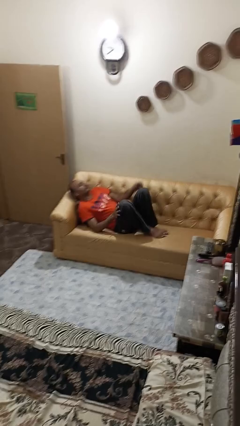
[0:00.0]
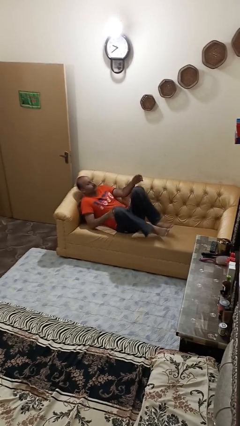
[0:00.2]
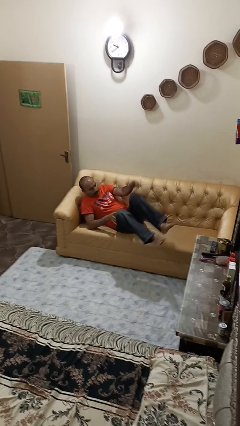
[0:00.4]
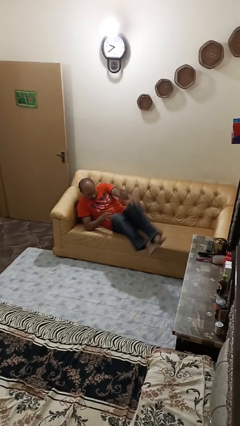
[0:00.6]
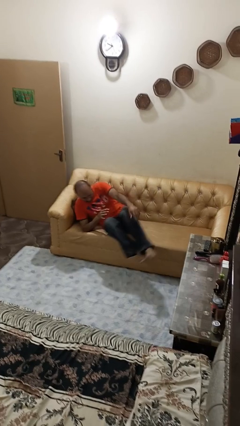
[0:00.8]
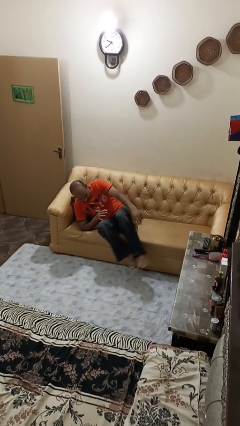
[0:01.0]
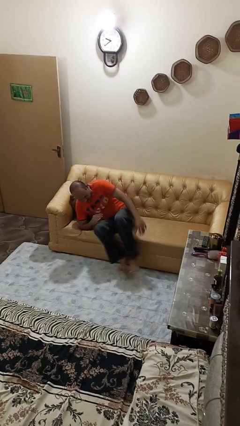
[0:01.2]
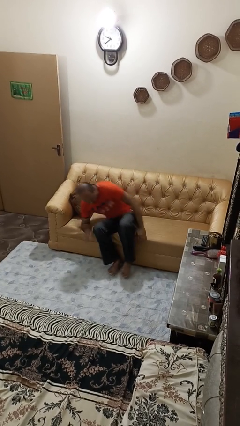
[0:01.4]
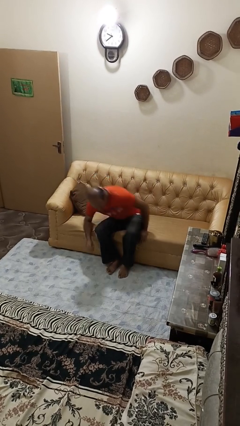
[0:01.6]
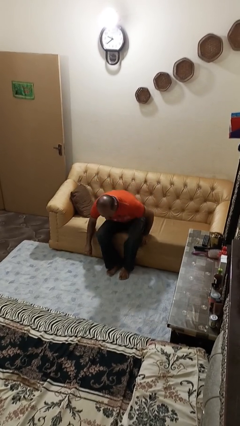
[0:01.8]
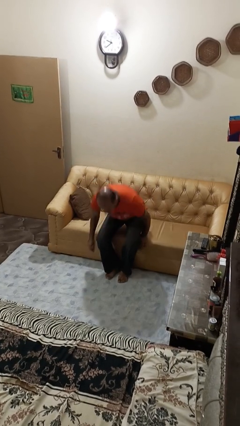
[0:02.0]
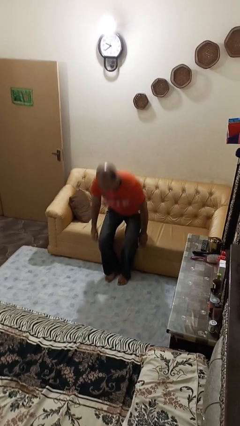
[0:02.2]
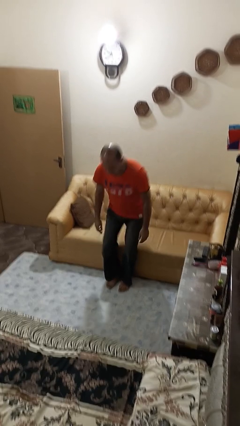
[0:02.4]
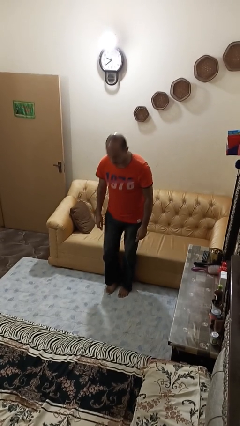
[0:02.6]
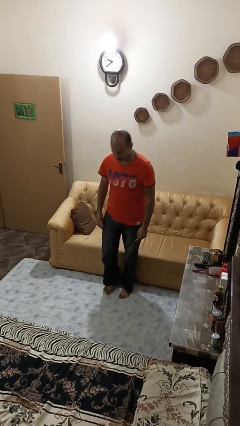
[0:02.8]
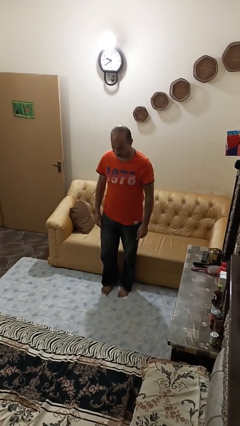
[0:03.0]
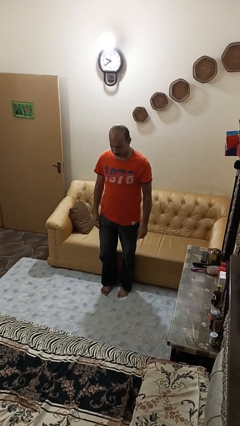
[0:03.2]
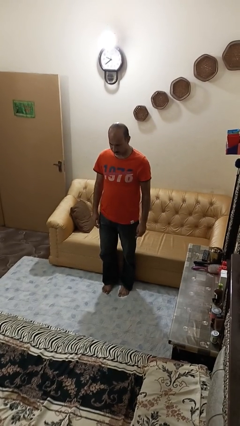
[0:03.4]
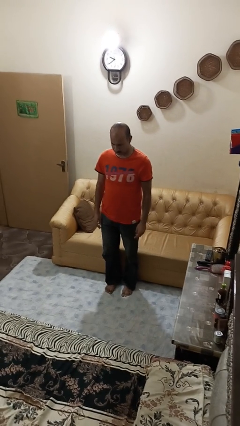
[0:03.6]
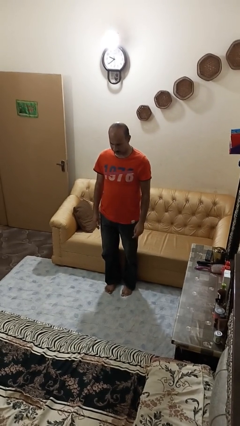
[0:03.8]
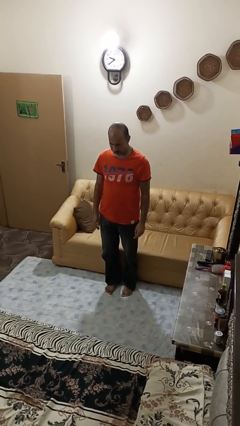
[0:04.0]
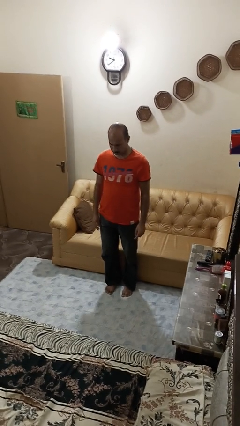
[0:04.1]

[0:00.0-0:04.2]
person stands up

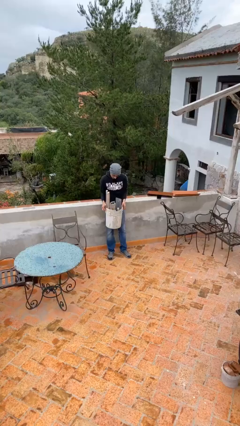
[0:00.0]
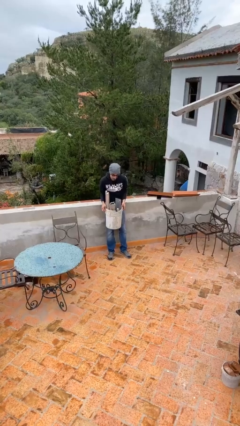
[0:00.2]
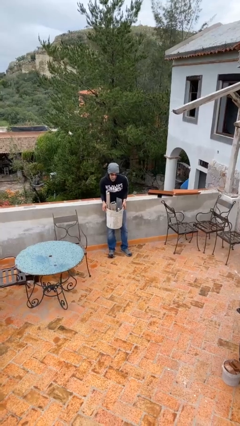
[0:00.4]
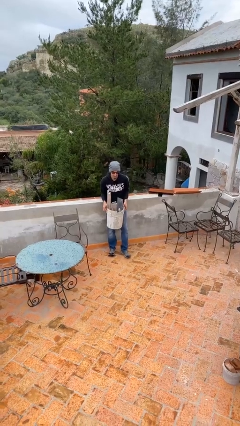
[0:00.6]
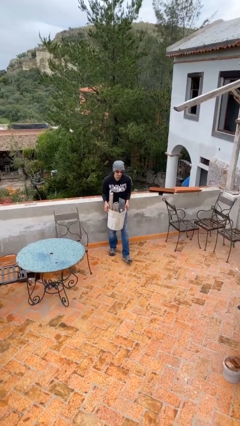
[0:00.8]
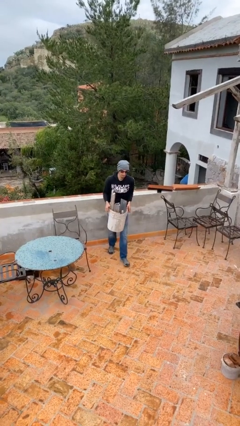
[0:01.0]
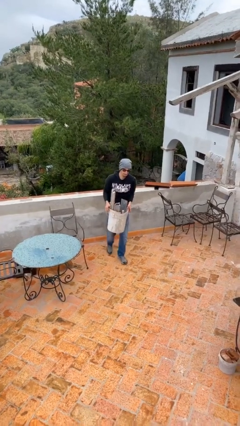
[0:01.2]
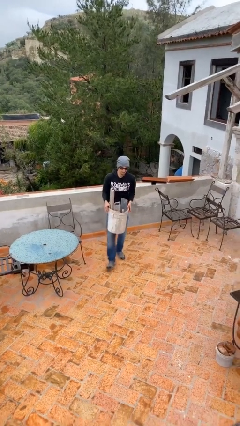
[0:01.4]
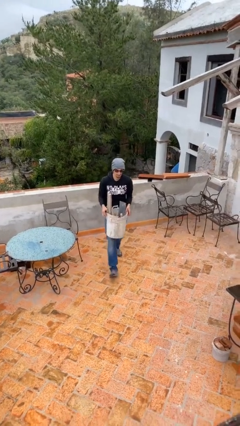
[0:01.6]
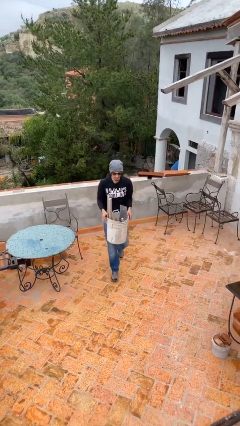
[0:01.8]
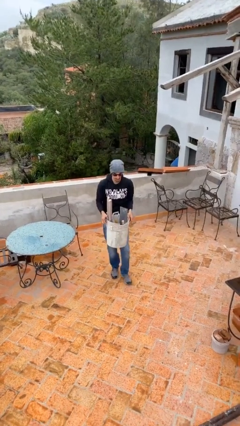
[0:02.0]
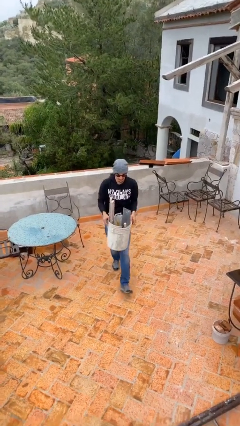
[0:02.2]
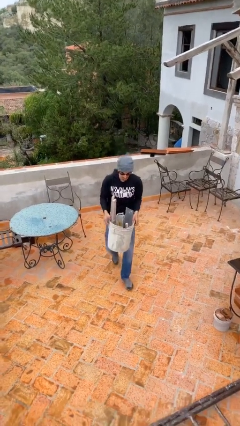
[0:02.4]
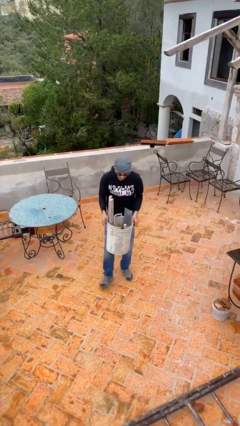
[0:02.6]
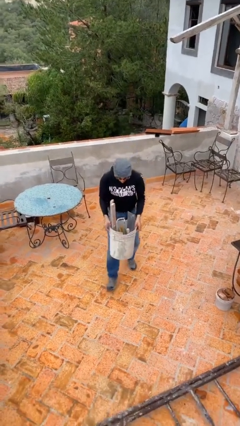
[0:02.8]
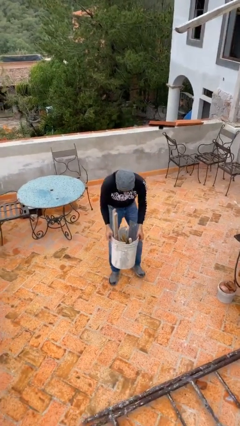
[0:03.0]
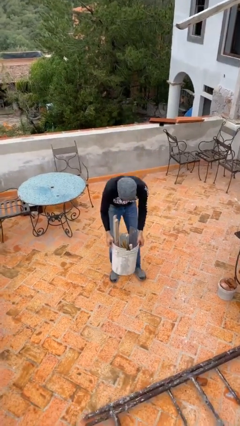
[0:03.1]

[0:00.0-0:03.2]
person carries heavy object

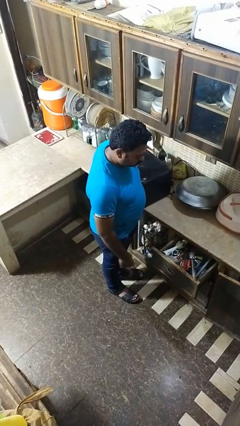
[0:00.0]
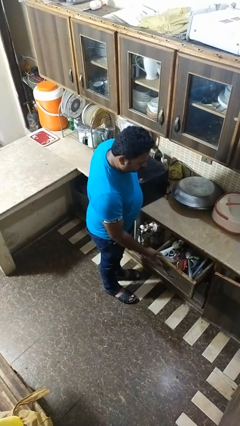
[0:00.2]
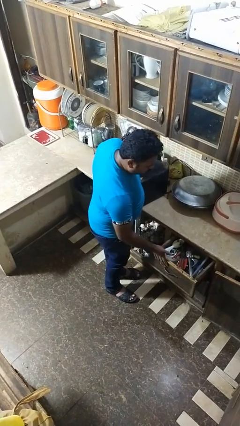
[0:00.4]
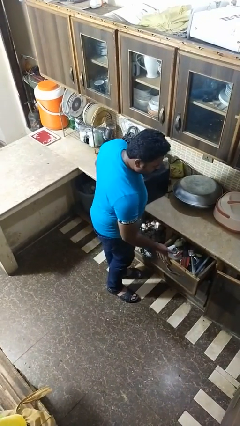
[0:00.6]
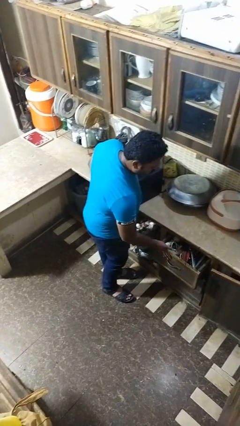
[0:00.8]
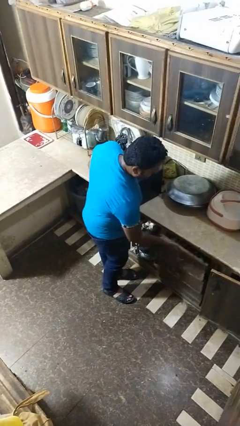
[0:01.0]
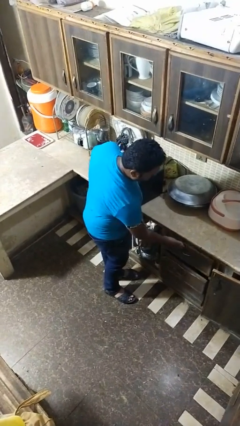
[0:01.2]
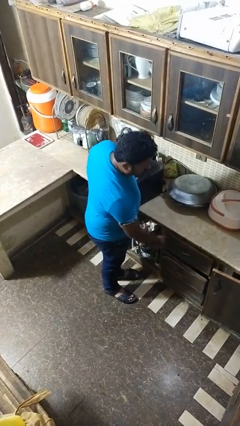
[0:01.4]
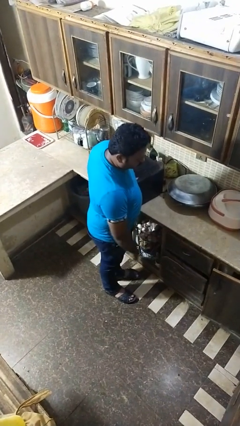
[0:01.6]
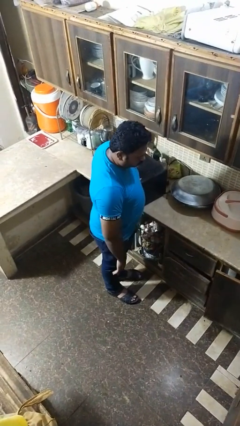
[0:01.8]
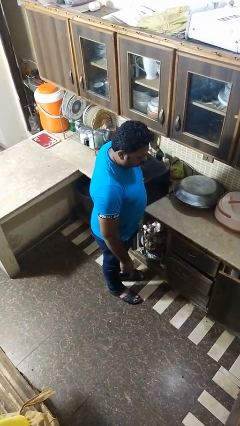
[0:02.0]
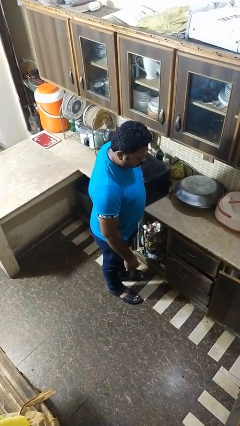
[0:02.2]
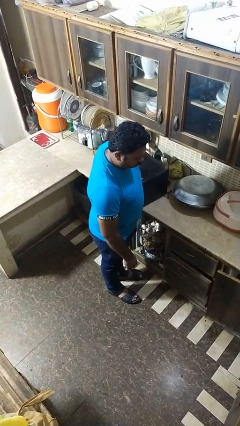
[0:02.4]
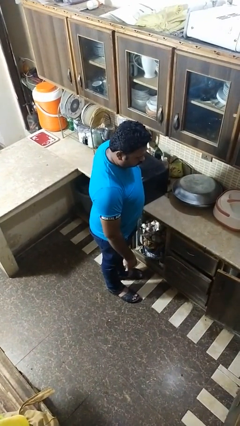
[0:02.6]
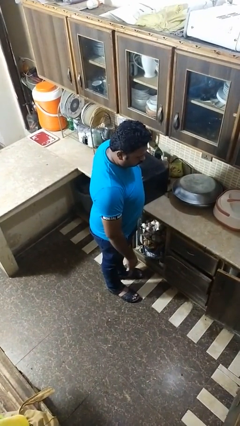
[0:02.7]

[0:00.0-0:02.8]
person closes dresser drawer

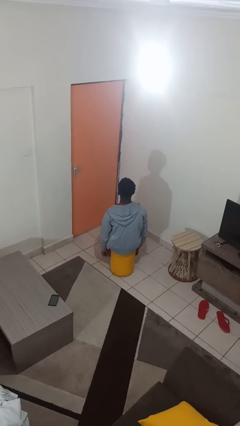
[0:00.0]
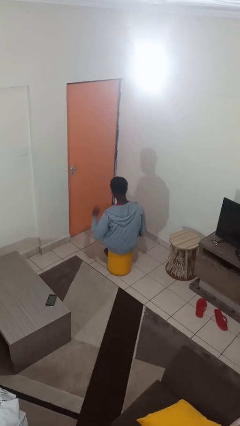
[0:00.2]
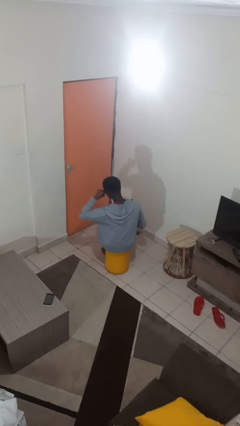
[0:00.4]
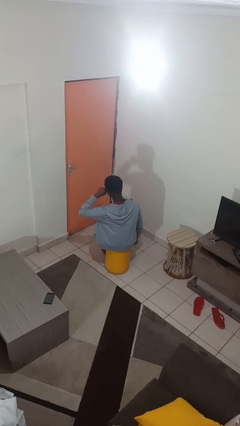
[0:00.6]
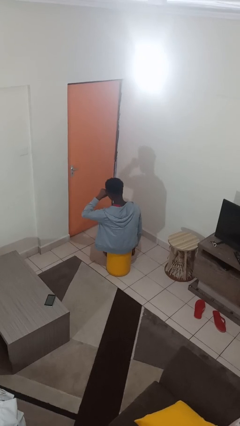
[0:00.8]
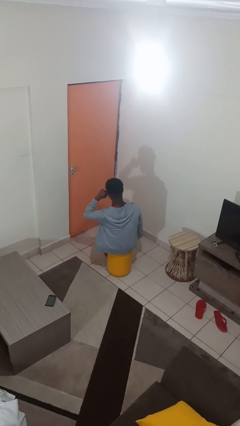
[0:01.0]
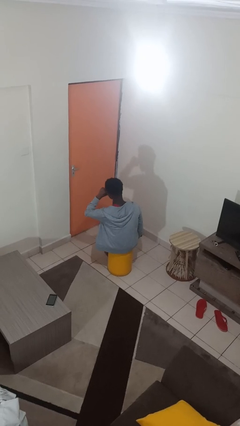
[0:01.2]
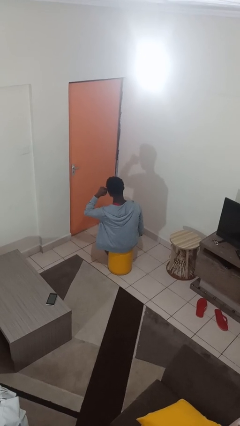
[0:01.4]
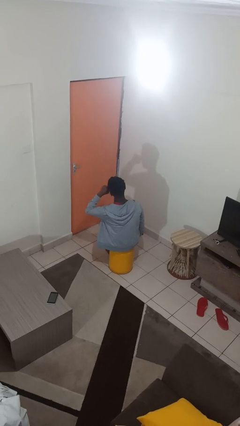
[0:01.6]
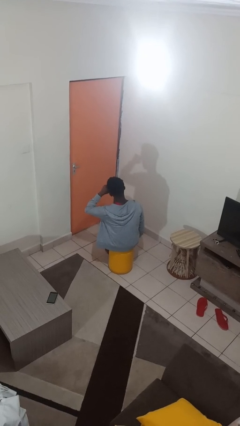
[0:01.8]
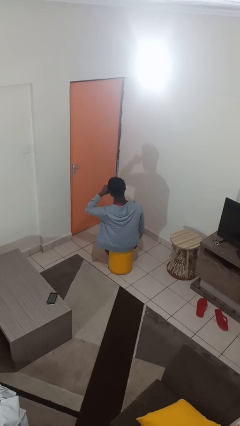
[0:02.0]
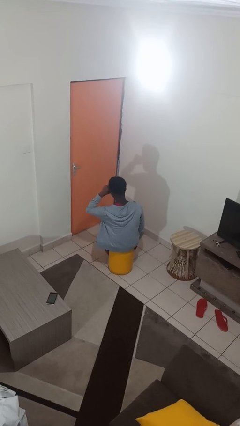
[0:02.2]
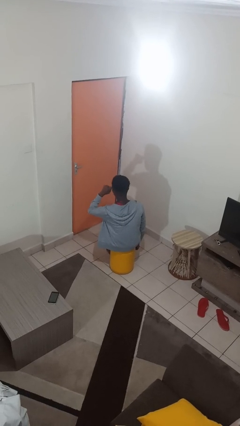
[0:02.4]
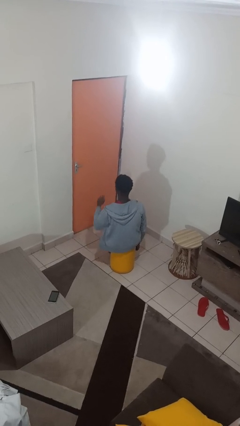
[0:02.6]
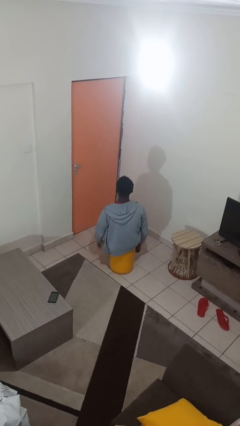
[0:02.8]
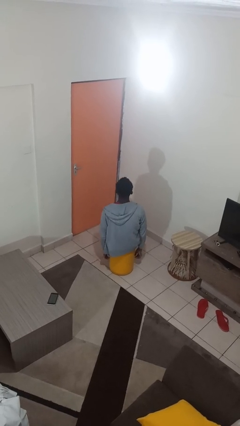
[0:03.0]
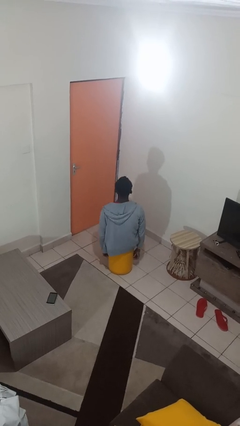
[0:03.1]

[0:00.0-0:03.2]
person rubs eyes

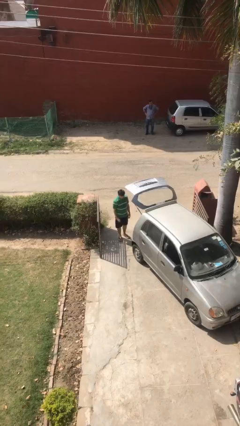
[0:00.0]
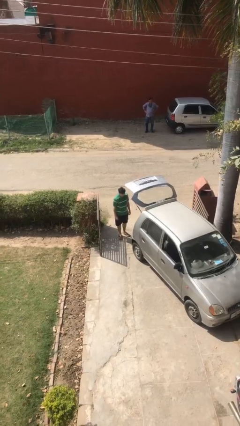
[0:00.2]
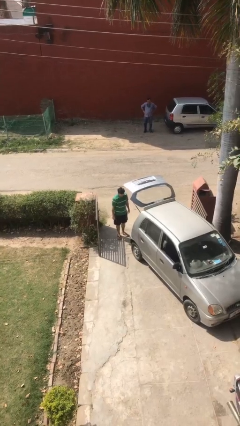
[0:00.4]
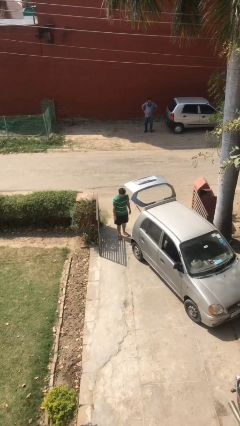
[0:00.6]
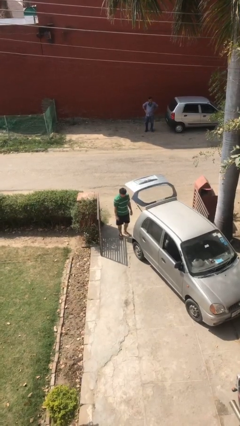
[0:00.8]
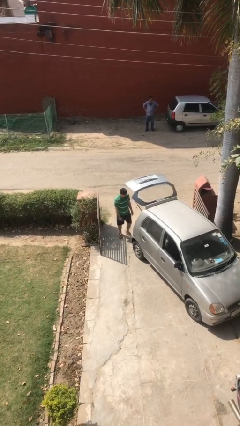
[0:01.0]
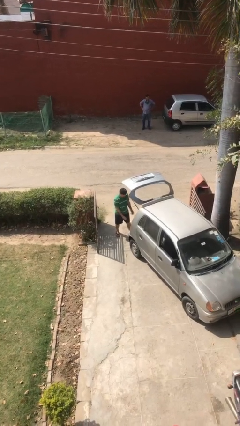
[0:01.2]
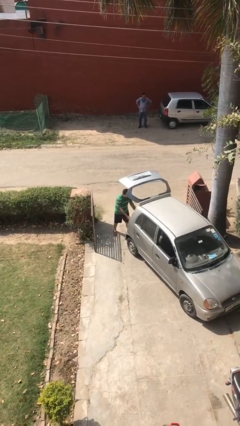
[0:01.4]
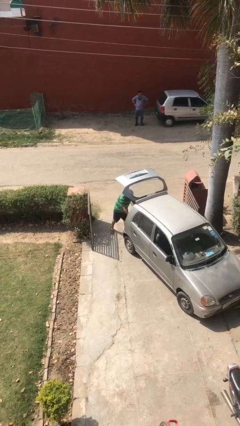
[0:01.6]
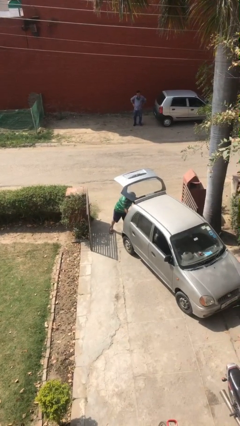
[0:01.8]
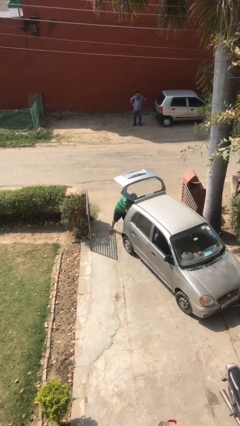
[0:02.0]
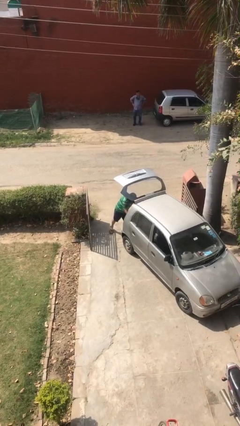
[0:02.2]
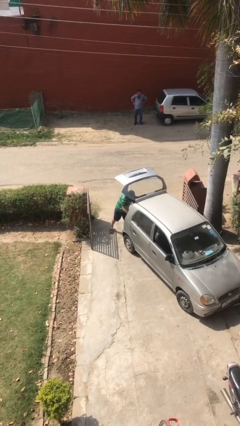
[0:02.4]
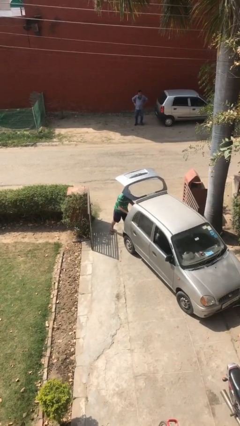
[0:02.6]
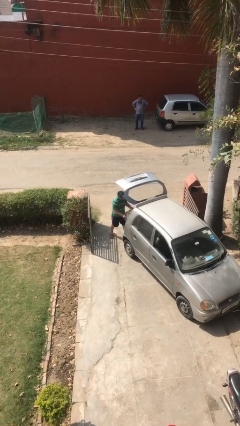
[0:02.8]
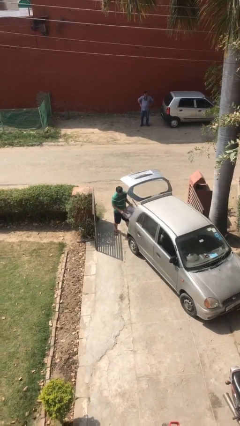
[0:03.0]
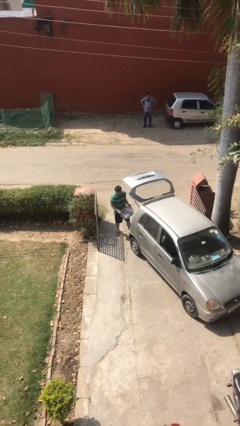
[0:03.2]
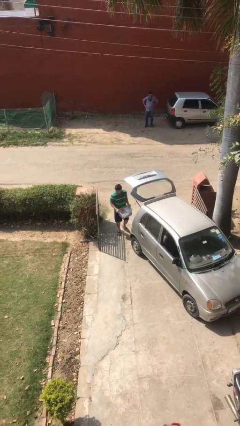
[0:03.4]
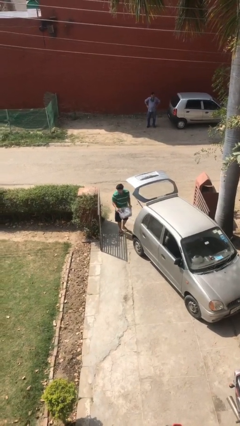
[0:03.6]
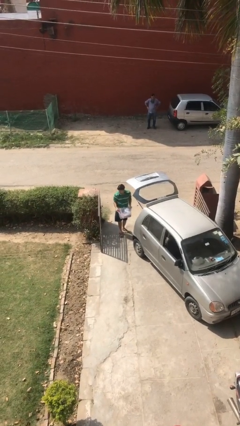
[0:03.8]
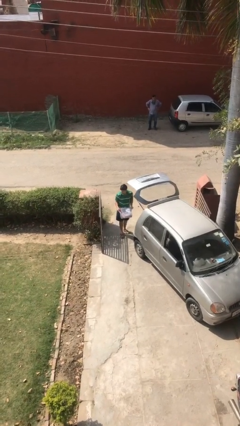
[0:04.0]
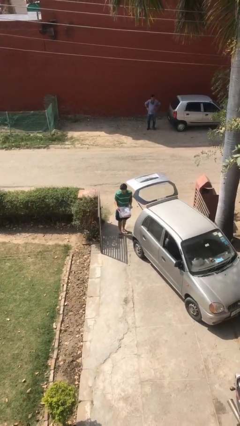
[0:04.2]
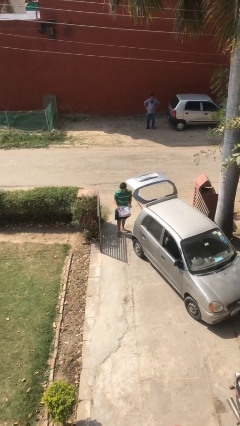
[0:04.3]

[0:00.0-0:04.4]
person unloads car
